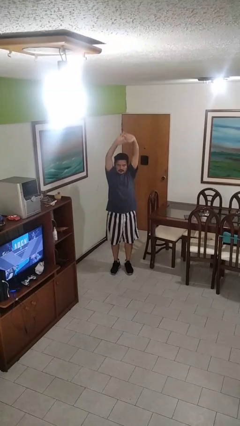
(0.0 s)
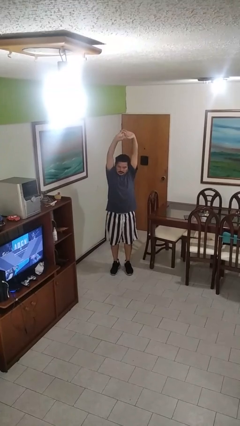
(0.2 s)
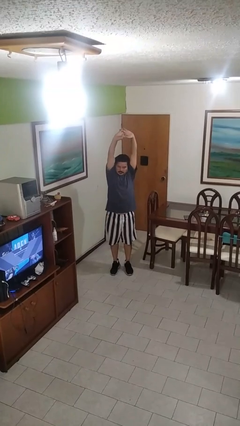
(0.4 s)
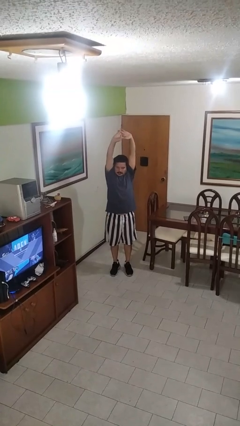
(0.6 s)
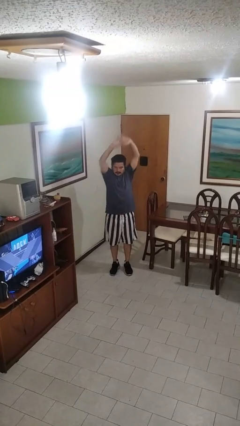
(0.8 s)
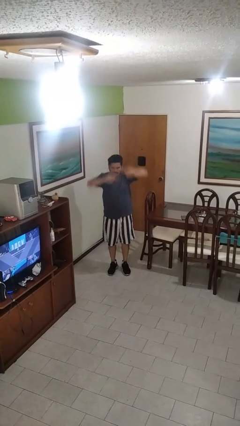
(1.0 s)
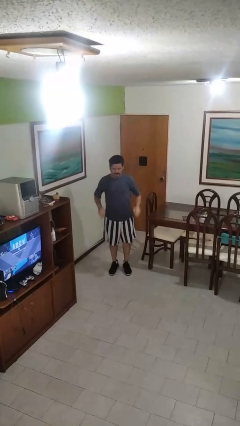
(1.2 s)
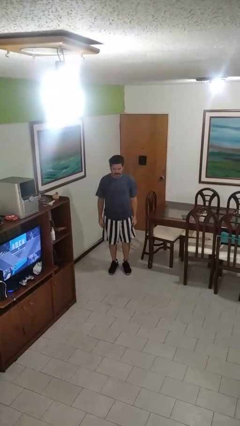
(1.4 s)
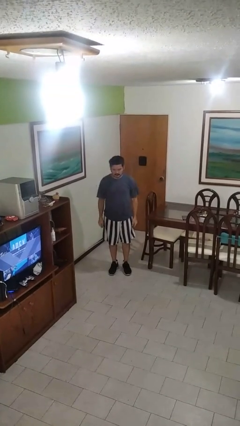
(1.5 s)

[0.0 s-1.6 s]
person stretches arms over head

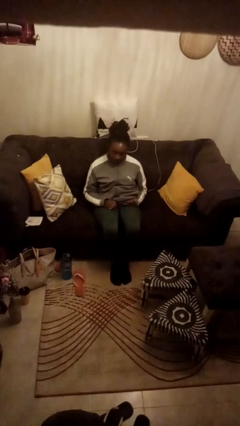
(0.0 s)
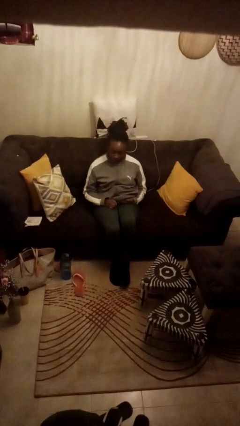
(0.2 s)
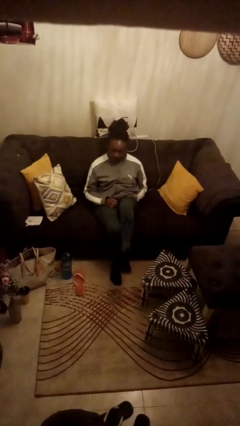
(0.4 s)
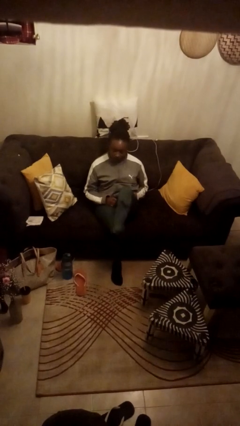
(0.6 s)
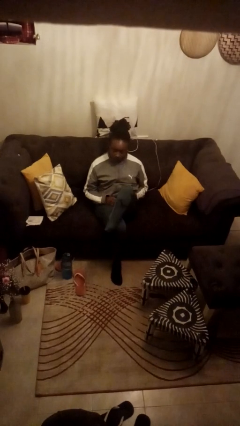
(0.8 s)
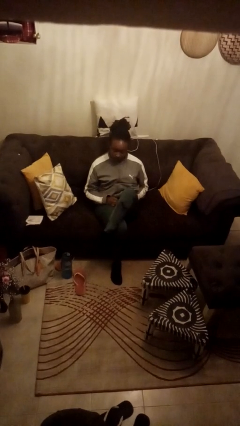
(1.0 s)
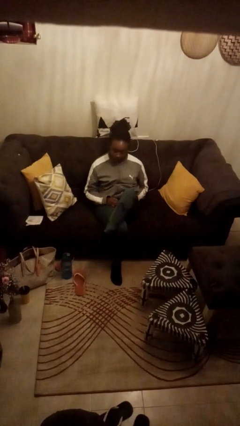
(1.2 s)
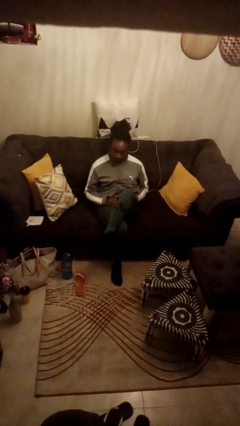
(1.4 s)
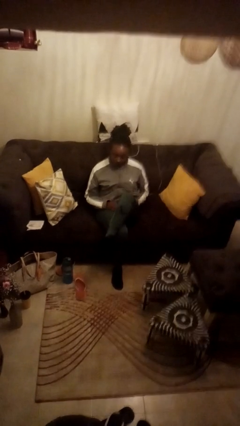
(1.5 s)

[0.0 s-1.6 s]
person crosses legs

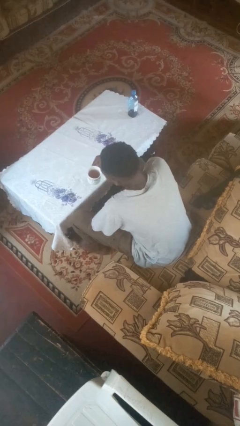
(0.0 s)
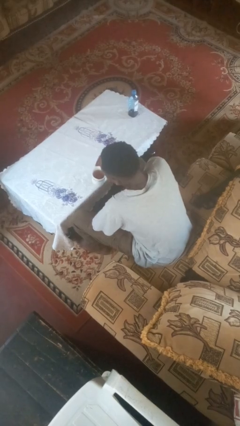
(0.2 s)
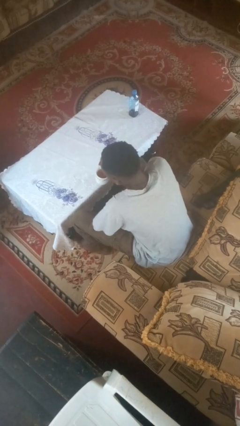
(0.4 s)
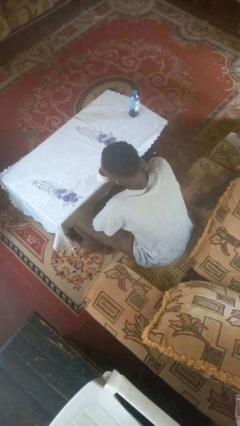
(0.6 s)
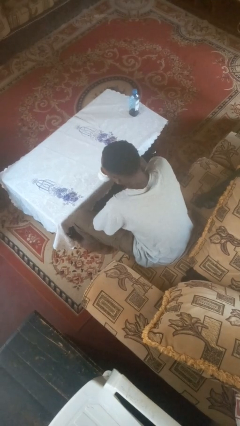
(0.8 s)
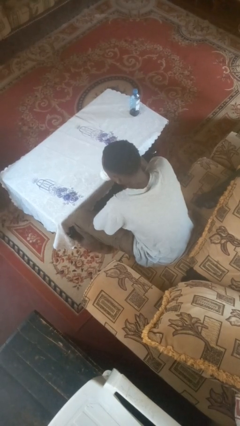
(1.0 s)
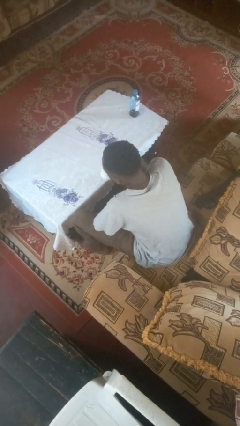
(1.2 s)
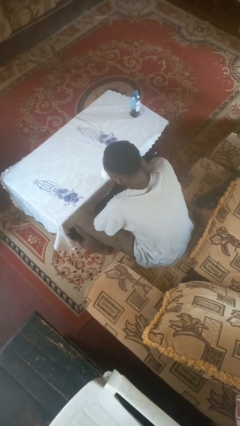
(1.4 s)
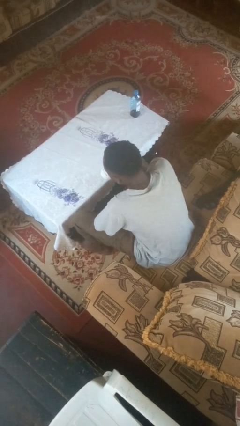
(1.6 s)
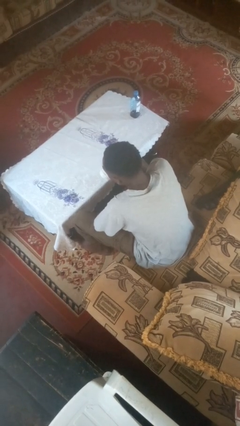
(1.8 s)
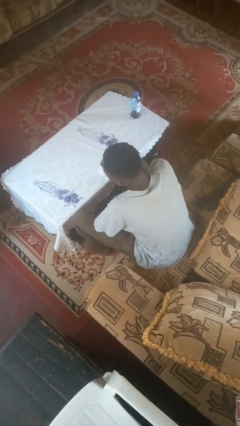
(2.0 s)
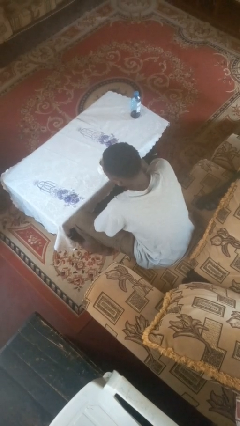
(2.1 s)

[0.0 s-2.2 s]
person drinks from mug

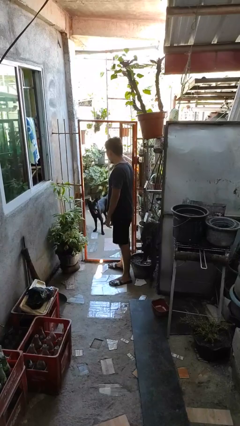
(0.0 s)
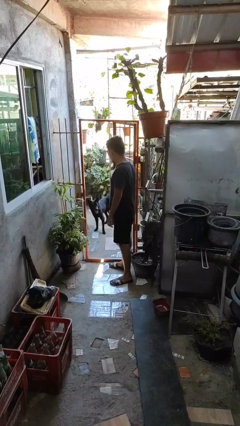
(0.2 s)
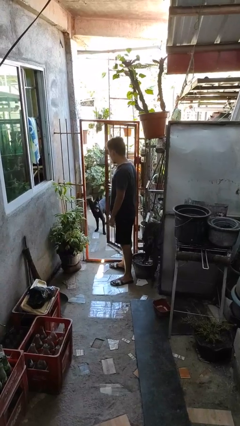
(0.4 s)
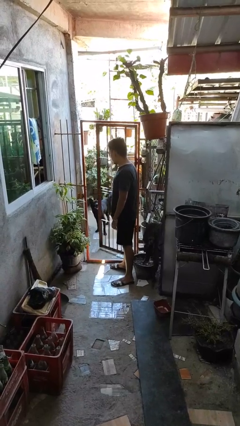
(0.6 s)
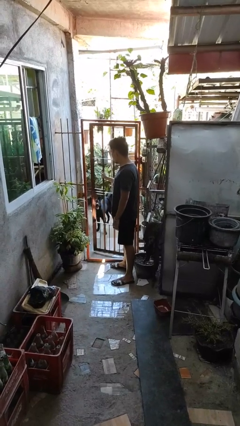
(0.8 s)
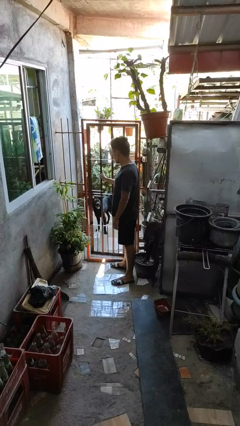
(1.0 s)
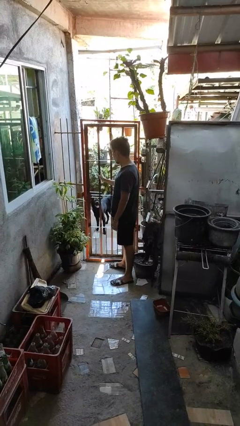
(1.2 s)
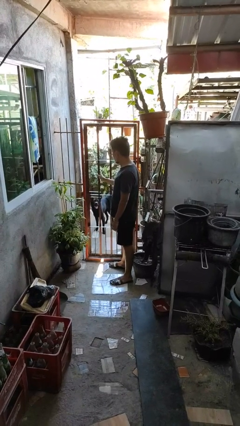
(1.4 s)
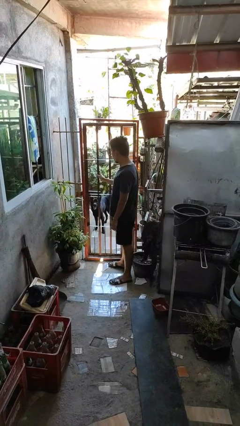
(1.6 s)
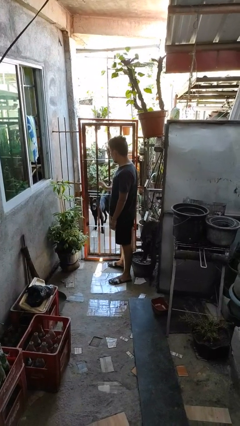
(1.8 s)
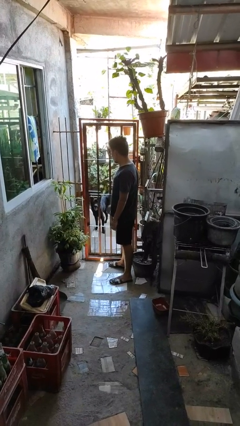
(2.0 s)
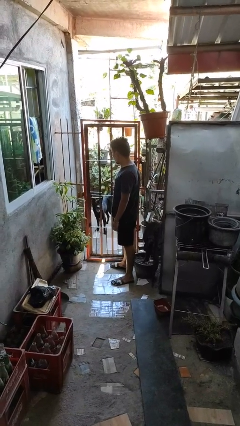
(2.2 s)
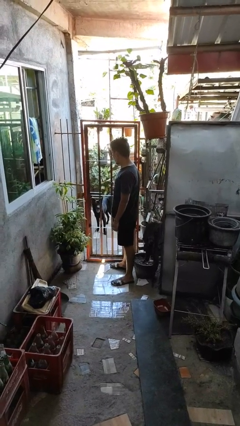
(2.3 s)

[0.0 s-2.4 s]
person closes gate

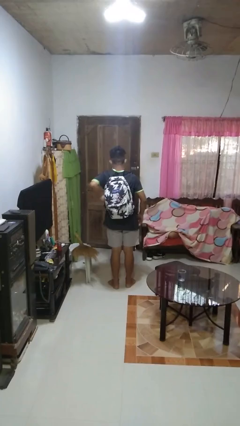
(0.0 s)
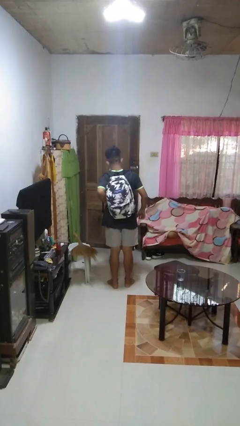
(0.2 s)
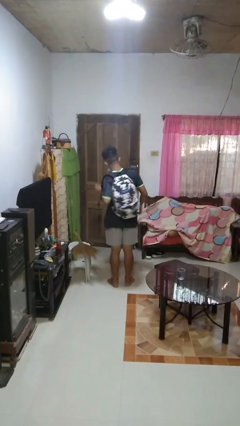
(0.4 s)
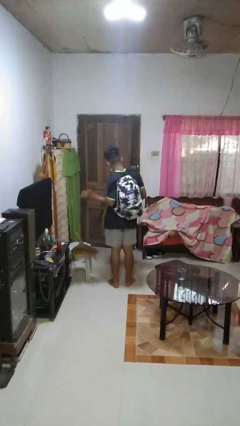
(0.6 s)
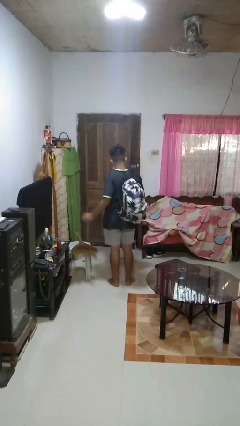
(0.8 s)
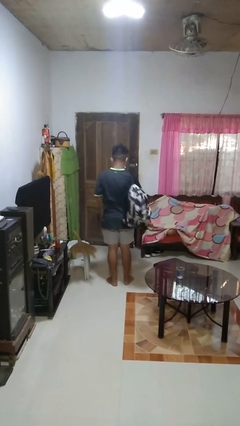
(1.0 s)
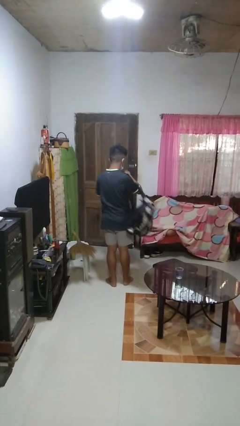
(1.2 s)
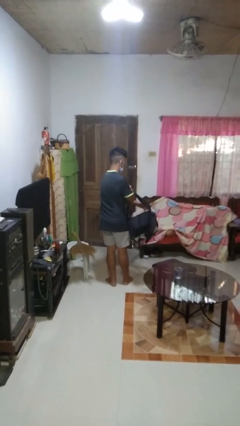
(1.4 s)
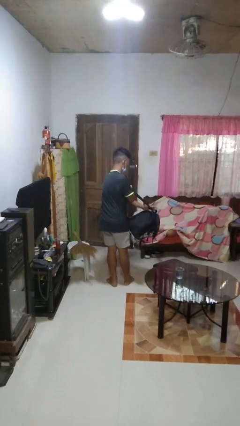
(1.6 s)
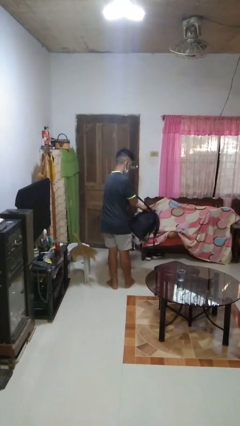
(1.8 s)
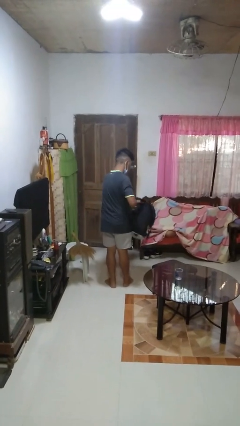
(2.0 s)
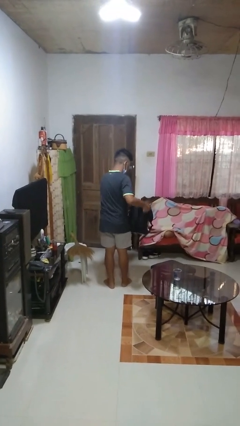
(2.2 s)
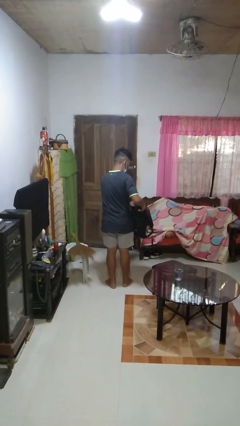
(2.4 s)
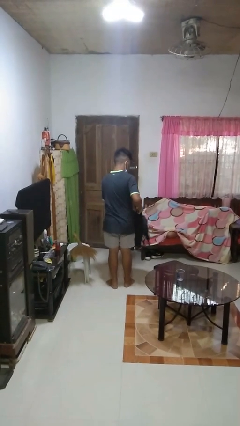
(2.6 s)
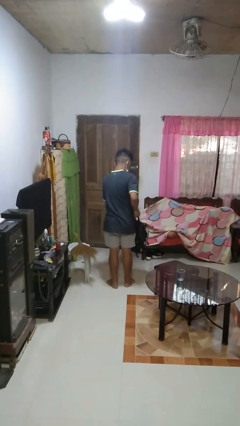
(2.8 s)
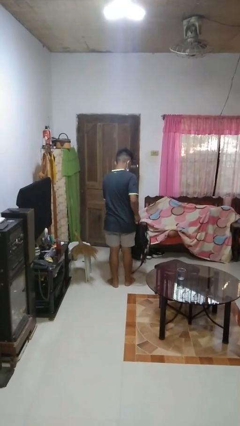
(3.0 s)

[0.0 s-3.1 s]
person takes off backpack

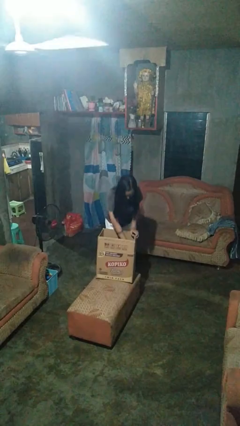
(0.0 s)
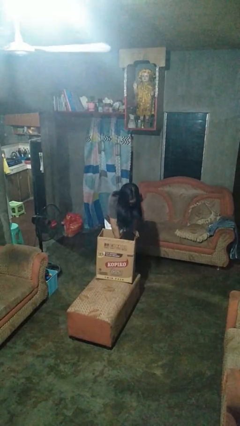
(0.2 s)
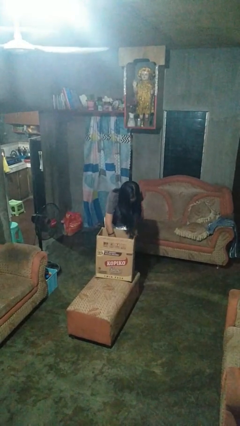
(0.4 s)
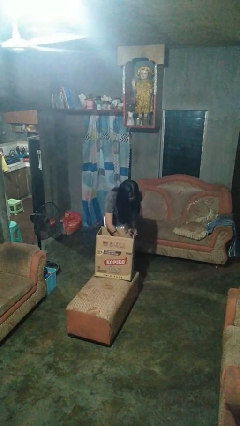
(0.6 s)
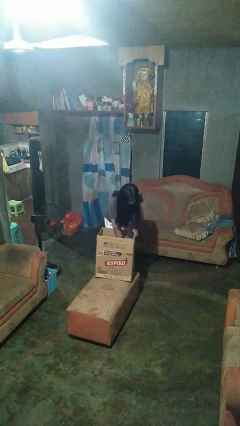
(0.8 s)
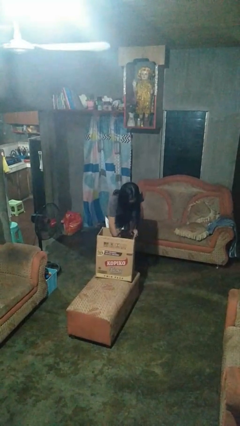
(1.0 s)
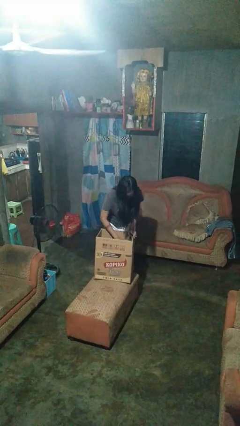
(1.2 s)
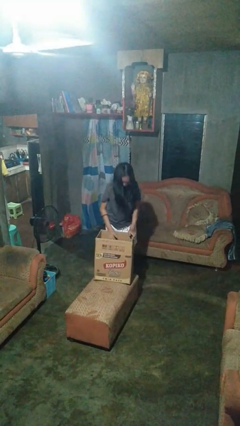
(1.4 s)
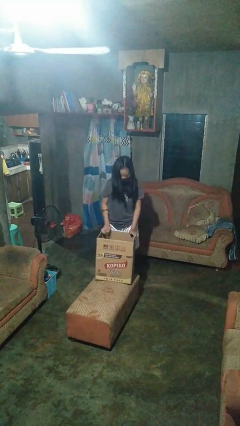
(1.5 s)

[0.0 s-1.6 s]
person searches in box

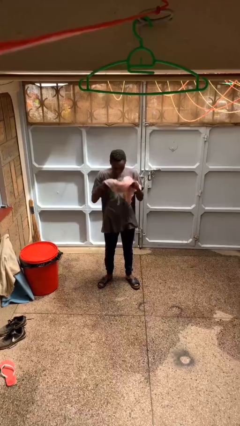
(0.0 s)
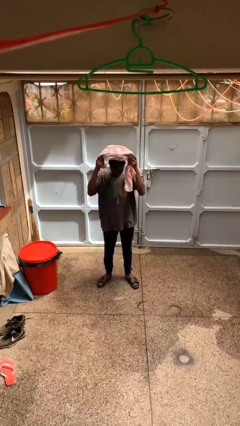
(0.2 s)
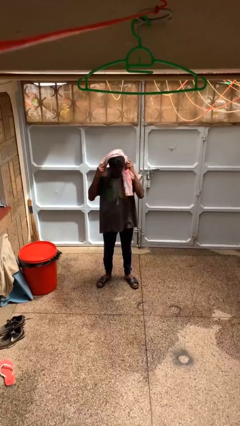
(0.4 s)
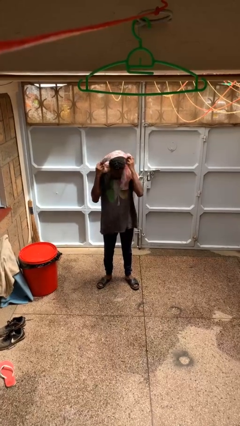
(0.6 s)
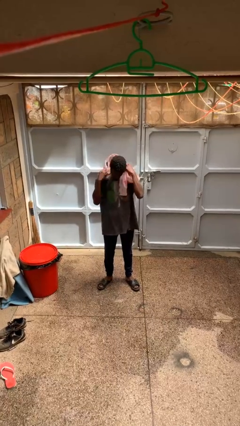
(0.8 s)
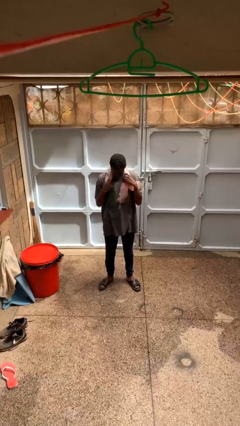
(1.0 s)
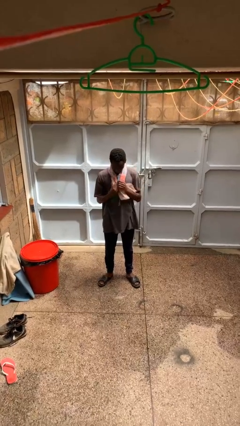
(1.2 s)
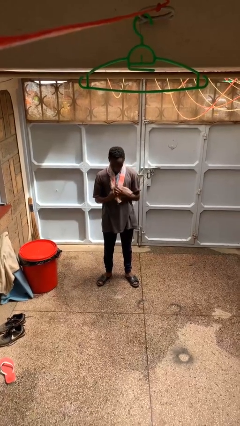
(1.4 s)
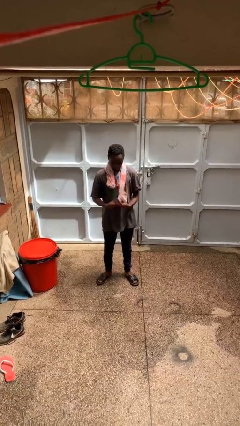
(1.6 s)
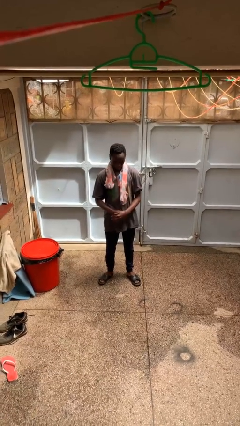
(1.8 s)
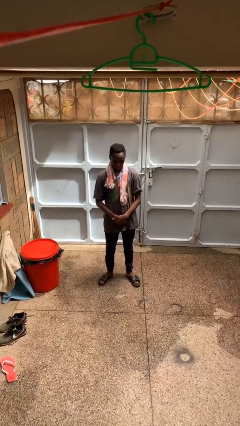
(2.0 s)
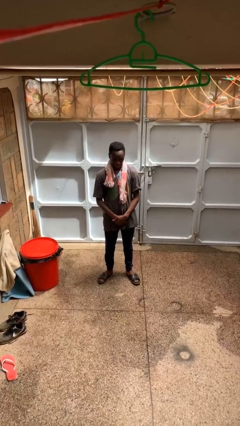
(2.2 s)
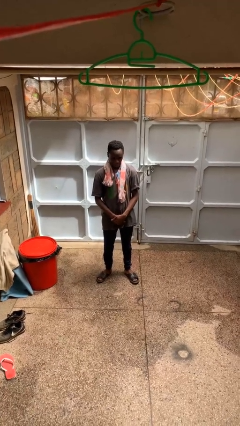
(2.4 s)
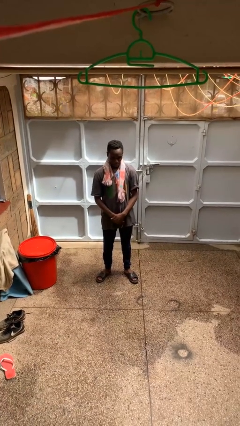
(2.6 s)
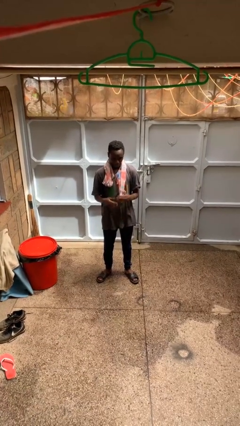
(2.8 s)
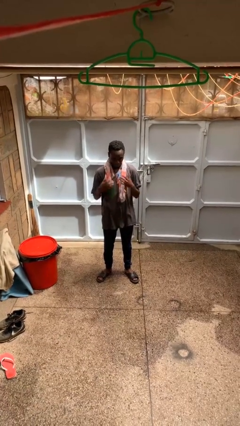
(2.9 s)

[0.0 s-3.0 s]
person puts on scarf

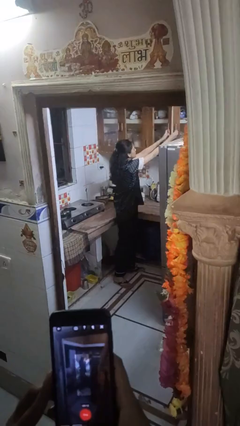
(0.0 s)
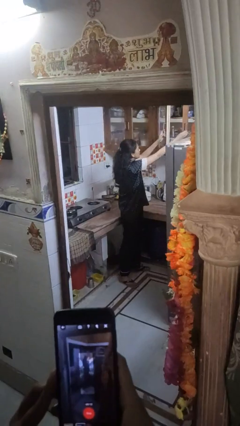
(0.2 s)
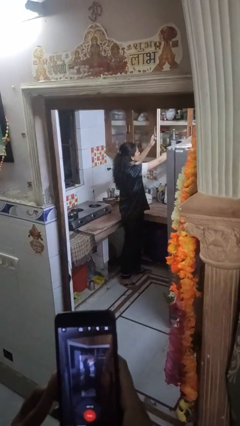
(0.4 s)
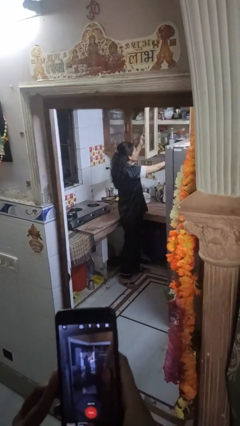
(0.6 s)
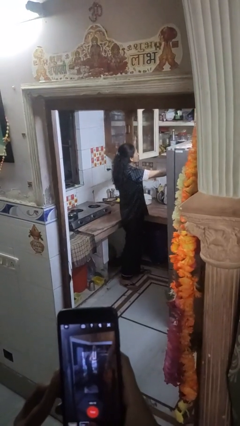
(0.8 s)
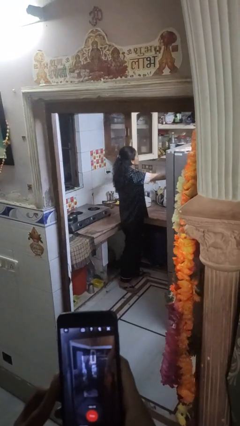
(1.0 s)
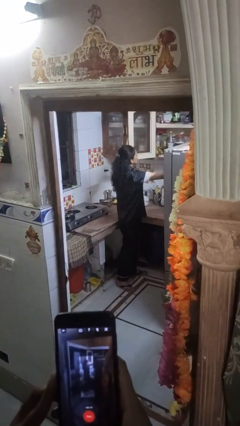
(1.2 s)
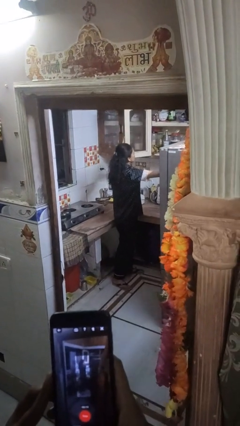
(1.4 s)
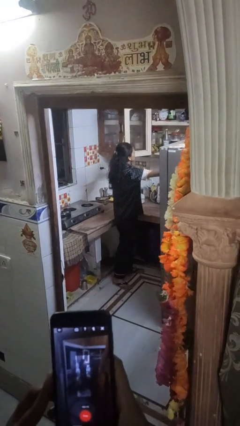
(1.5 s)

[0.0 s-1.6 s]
person opens cabinet
